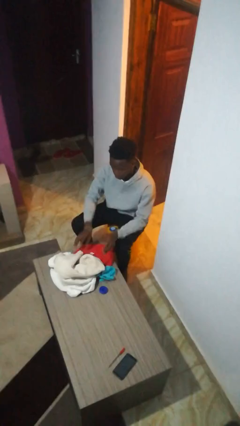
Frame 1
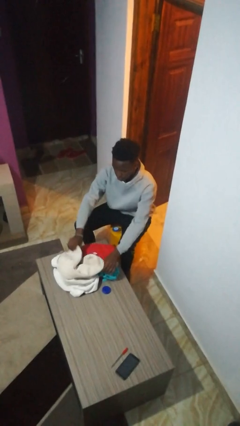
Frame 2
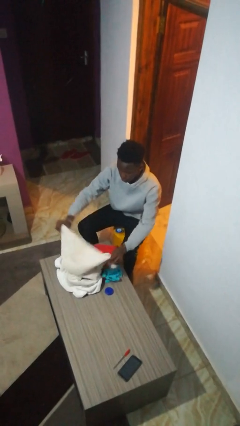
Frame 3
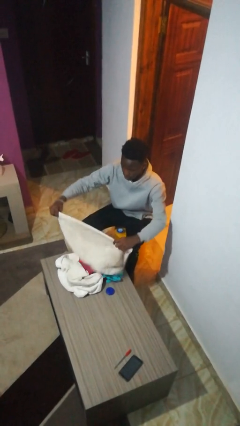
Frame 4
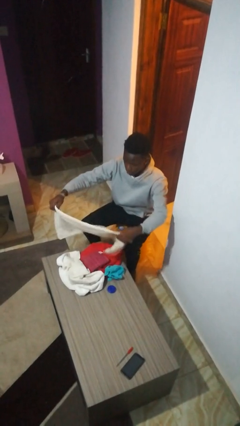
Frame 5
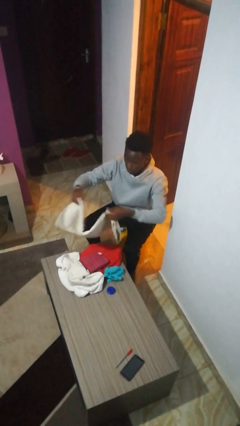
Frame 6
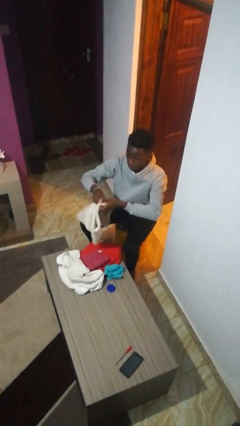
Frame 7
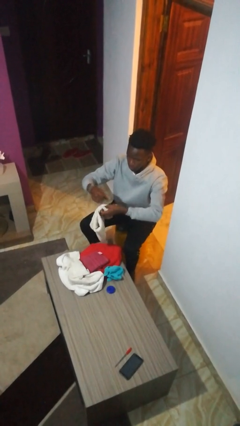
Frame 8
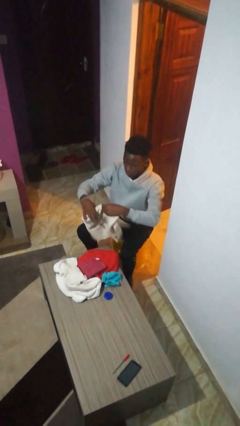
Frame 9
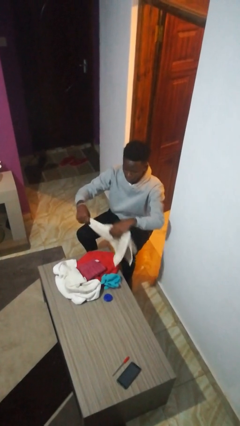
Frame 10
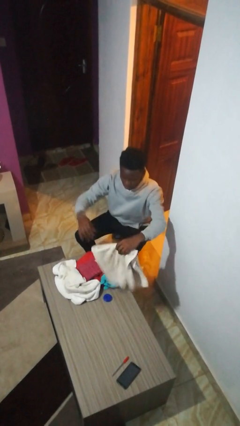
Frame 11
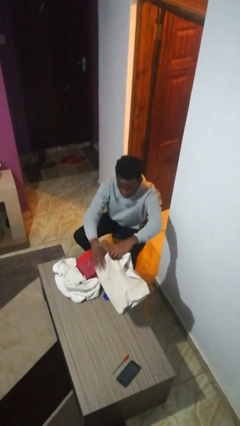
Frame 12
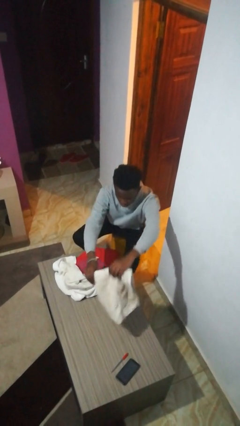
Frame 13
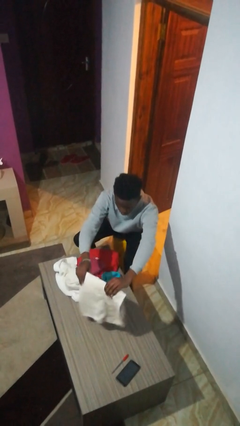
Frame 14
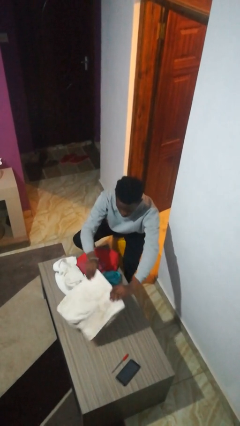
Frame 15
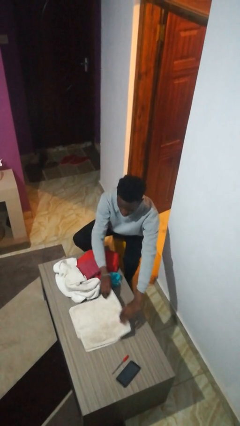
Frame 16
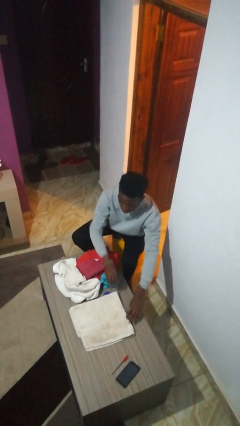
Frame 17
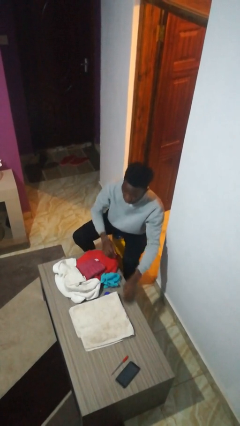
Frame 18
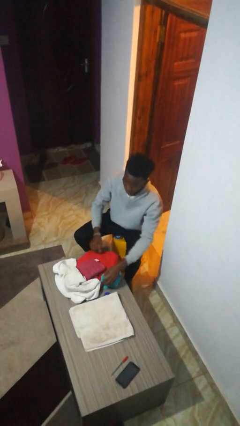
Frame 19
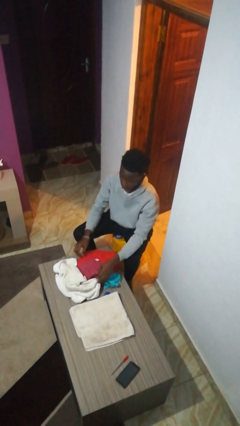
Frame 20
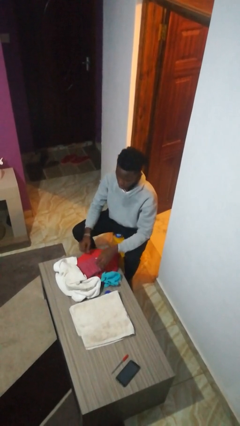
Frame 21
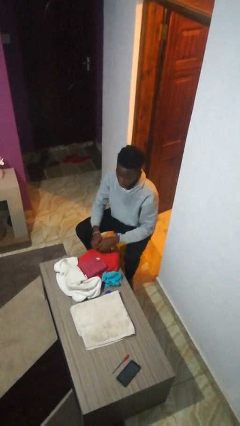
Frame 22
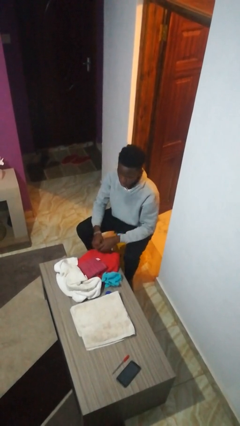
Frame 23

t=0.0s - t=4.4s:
person folds towel

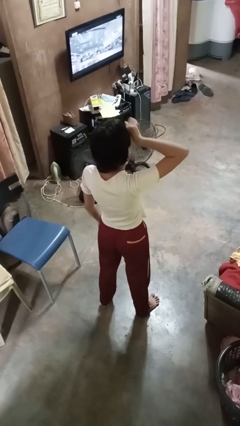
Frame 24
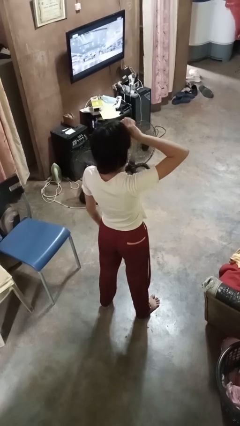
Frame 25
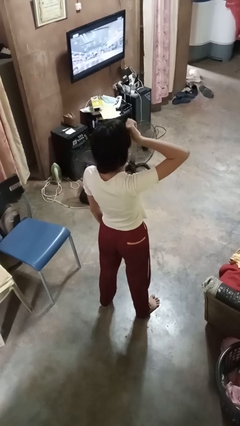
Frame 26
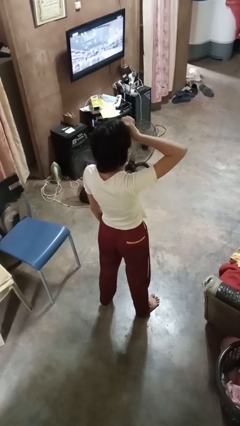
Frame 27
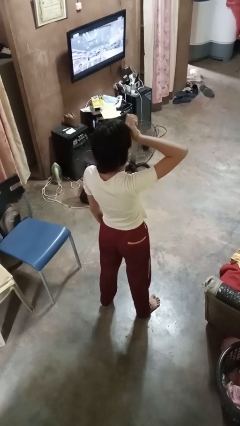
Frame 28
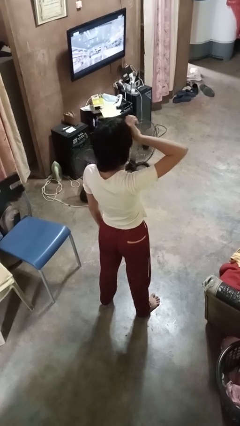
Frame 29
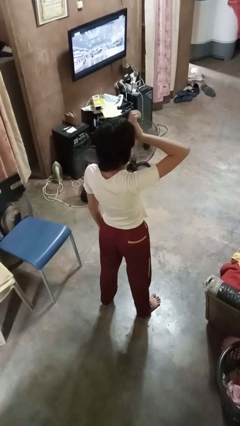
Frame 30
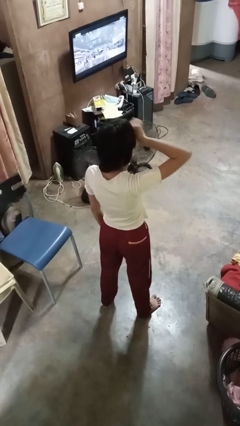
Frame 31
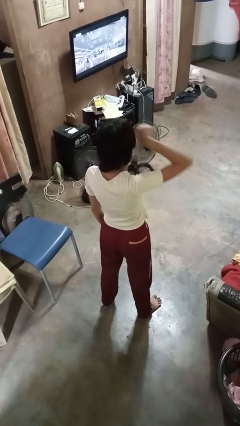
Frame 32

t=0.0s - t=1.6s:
person rubs eyes

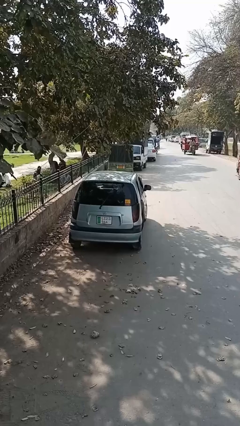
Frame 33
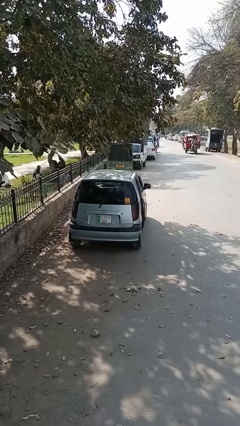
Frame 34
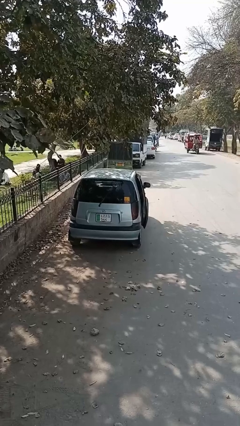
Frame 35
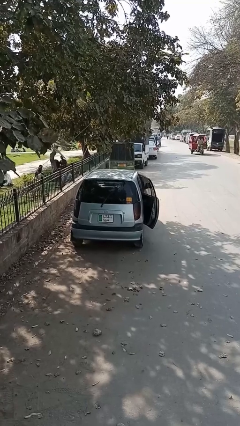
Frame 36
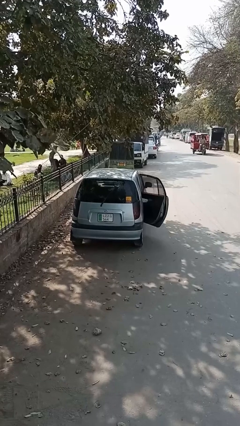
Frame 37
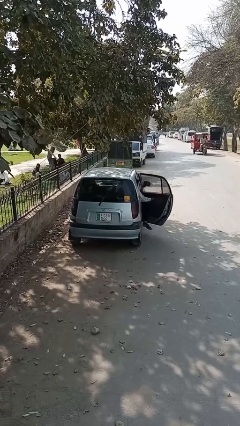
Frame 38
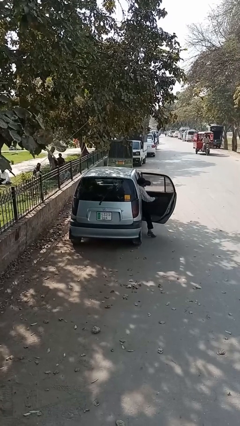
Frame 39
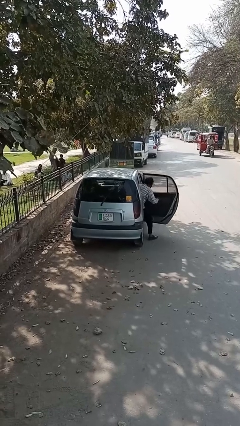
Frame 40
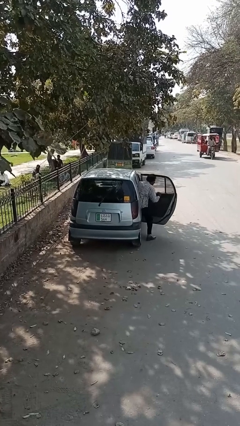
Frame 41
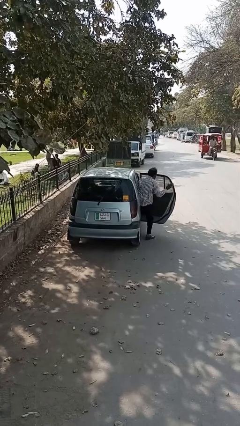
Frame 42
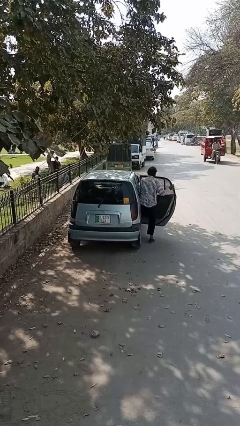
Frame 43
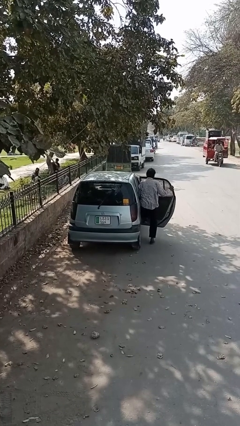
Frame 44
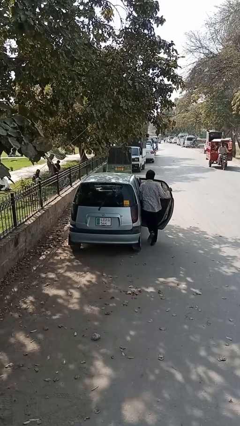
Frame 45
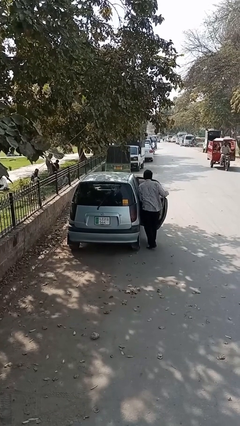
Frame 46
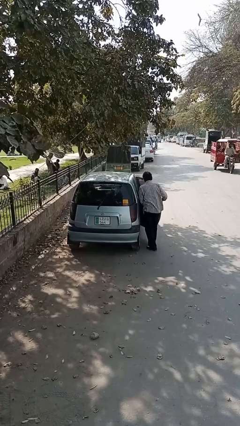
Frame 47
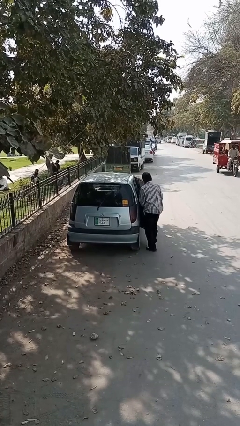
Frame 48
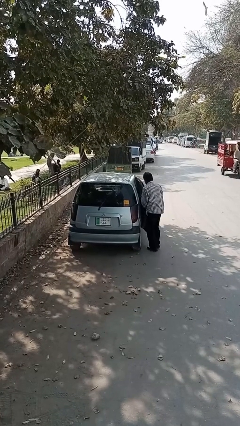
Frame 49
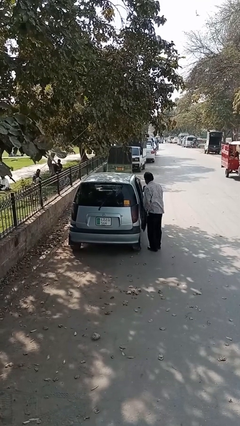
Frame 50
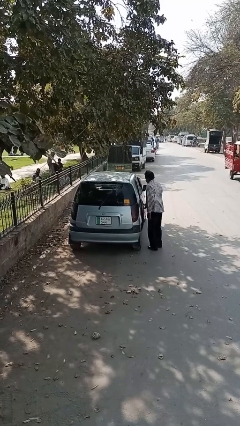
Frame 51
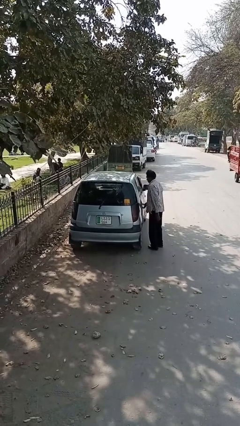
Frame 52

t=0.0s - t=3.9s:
car drops off person

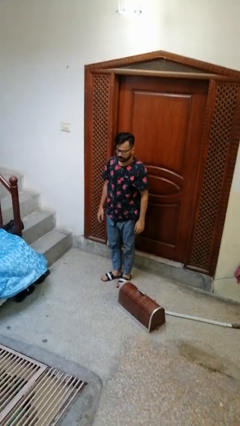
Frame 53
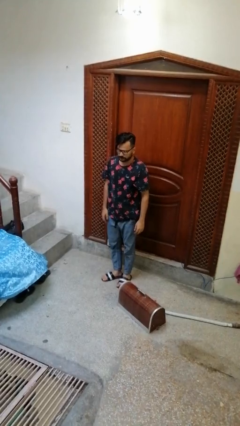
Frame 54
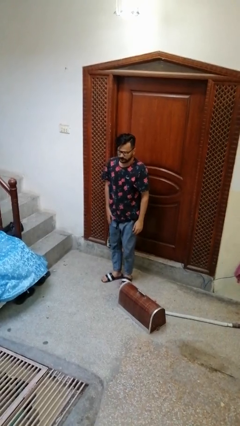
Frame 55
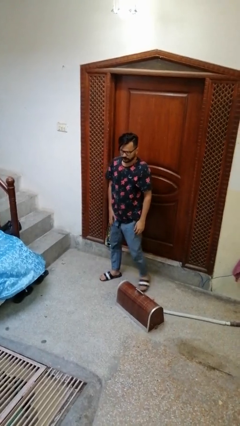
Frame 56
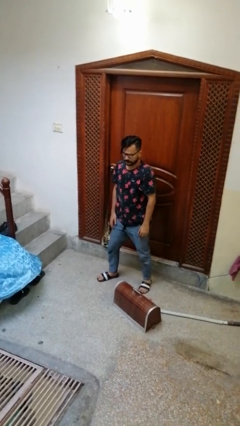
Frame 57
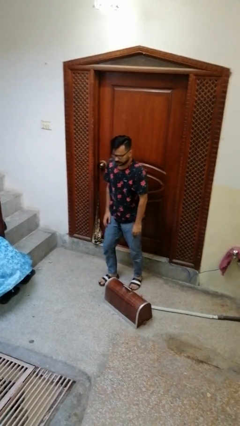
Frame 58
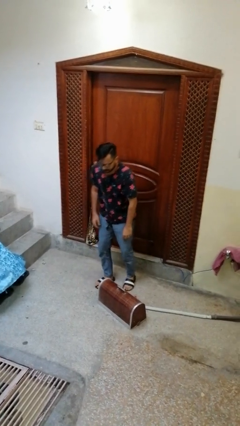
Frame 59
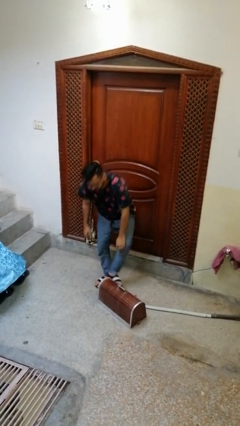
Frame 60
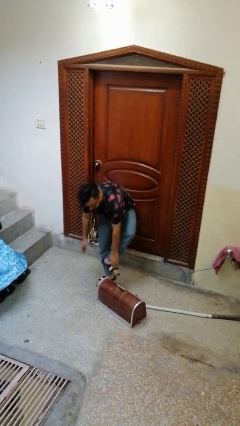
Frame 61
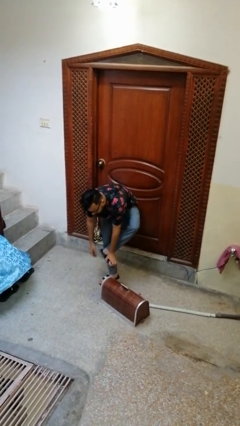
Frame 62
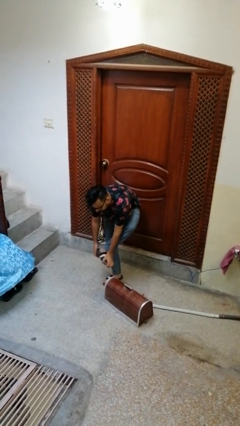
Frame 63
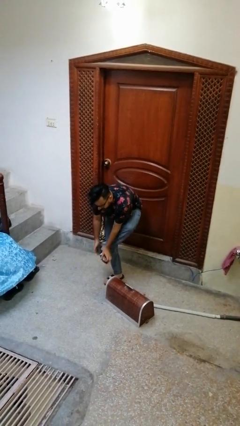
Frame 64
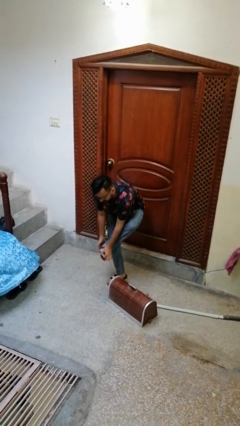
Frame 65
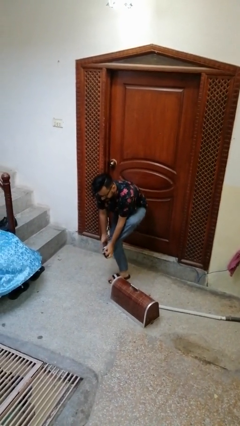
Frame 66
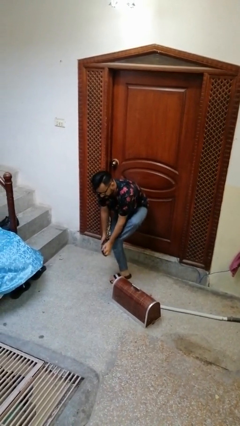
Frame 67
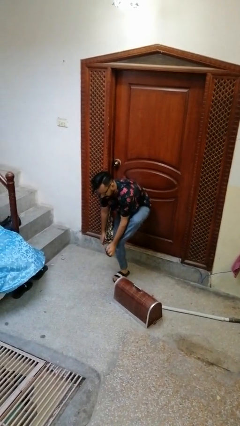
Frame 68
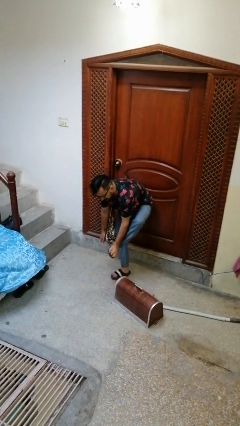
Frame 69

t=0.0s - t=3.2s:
person trips on object on floor

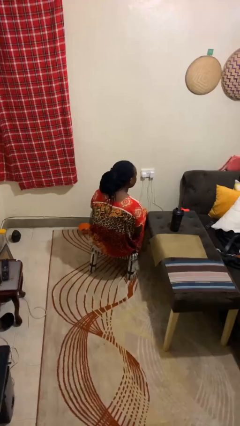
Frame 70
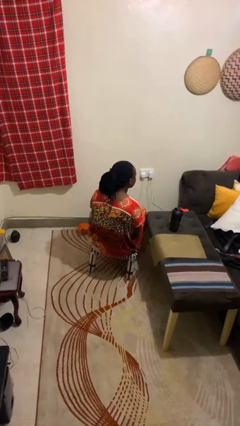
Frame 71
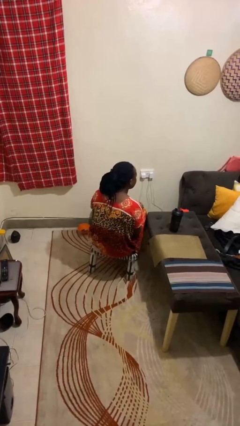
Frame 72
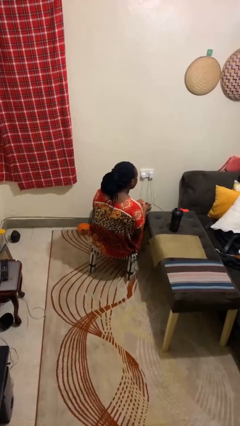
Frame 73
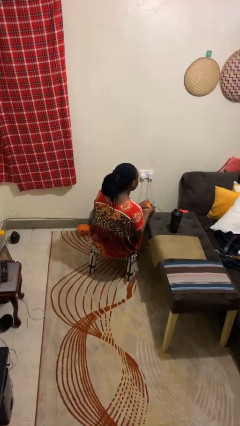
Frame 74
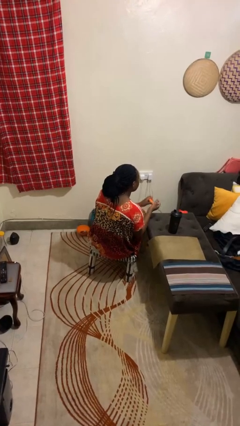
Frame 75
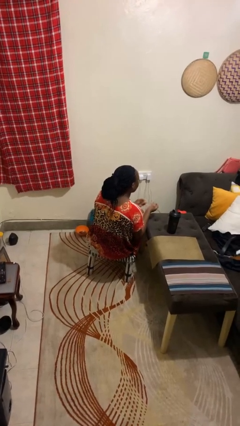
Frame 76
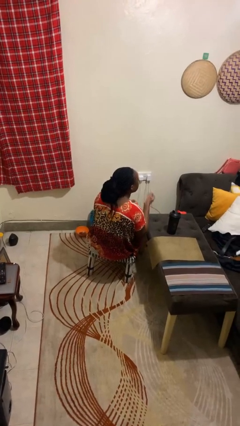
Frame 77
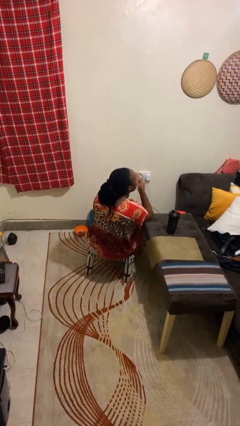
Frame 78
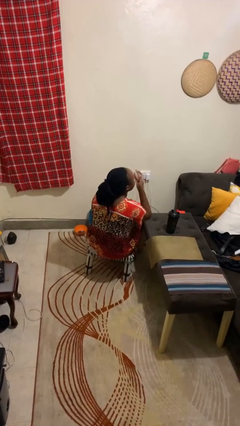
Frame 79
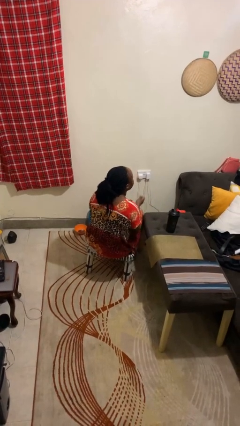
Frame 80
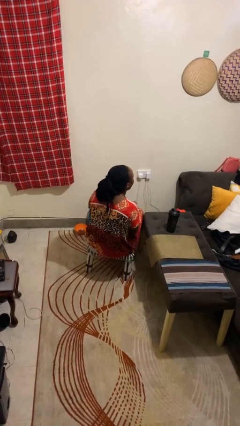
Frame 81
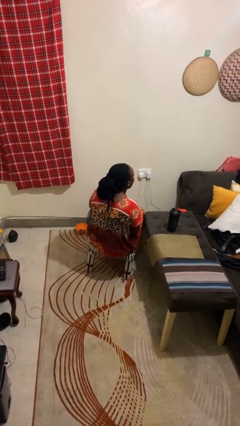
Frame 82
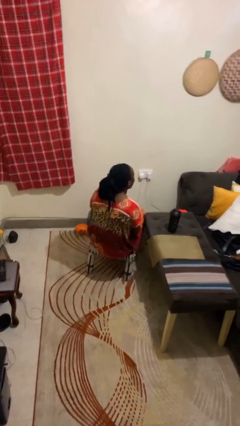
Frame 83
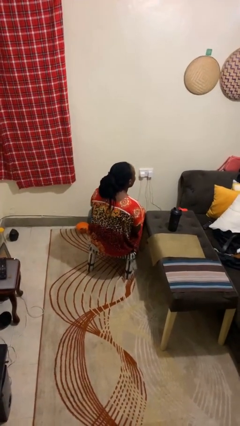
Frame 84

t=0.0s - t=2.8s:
person takes medicine pills

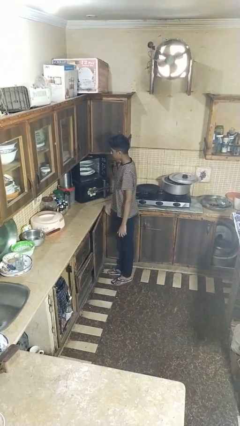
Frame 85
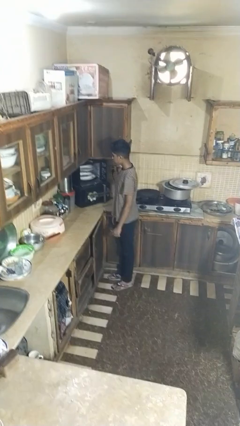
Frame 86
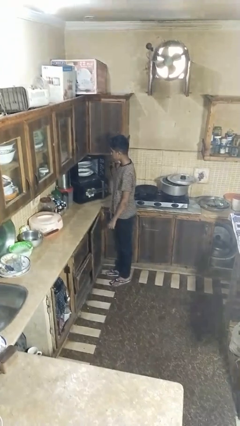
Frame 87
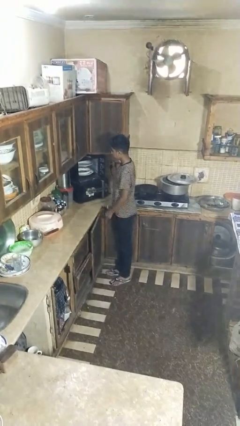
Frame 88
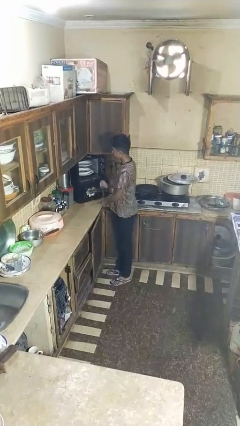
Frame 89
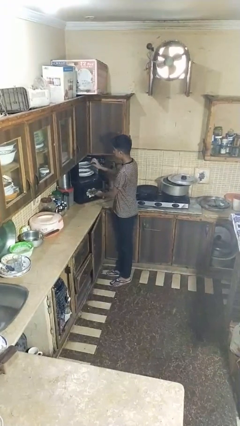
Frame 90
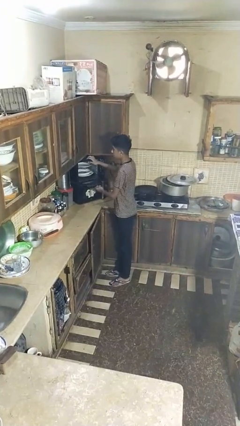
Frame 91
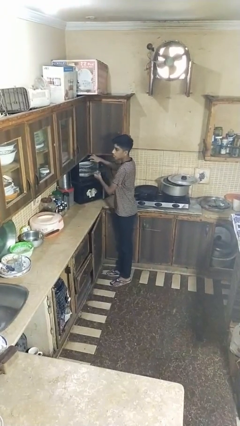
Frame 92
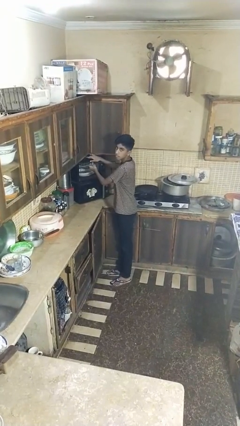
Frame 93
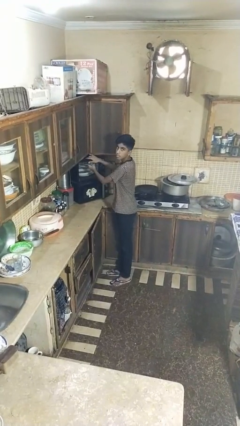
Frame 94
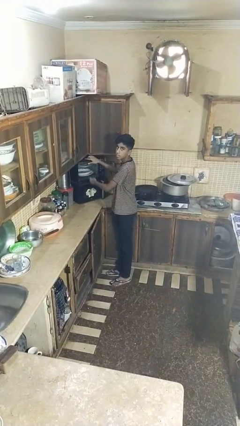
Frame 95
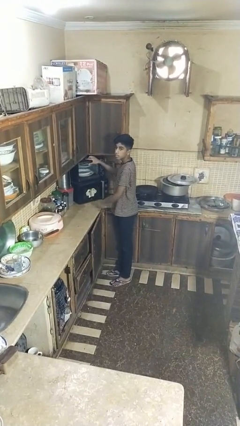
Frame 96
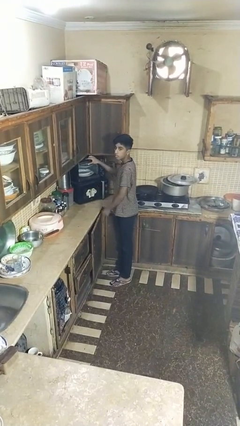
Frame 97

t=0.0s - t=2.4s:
person closes dishwasher
